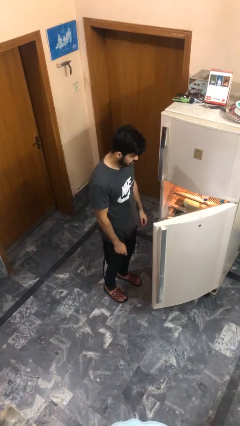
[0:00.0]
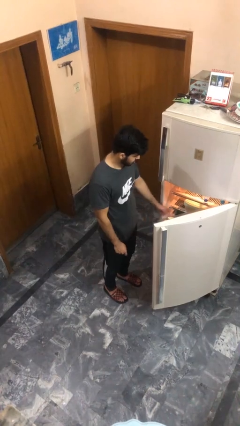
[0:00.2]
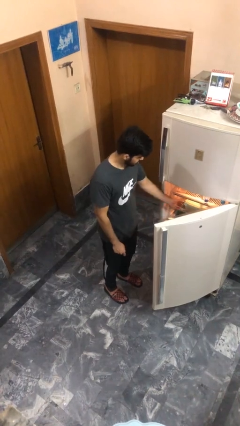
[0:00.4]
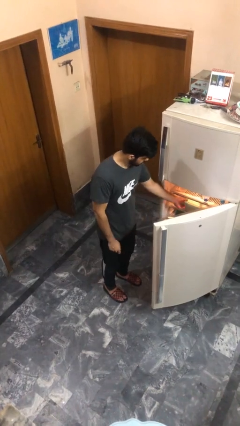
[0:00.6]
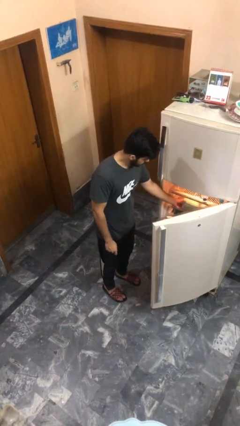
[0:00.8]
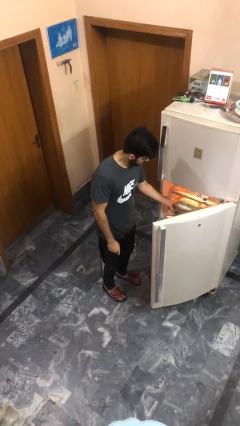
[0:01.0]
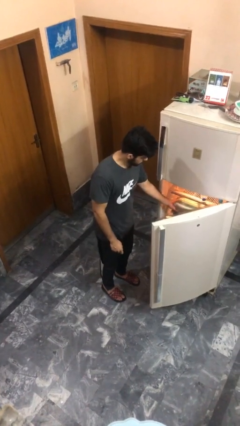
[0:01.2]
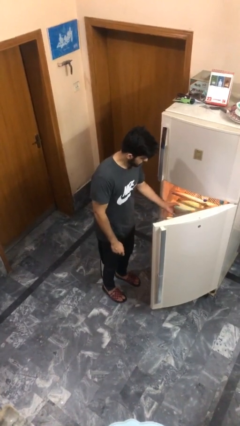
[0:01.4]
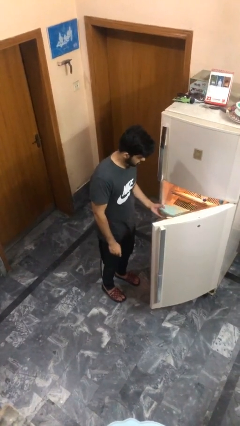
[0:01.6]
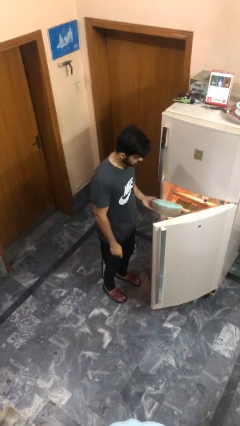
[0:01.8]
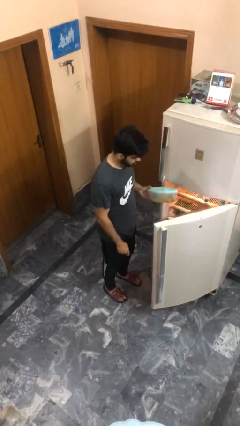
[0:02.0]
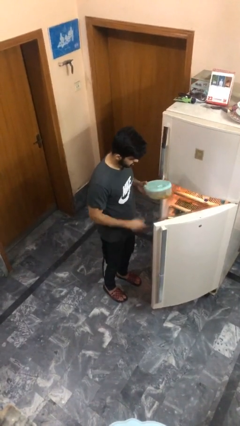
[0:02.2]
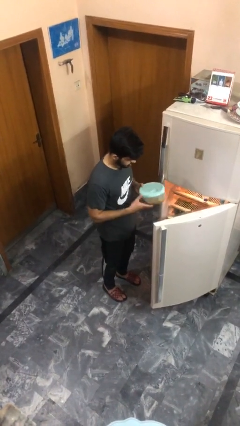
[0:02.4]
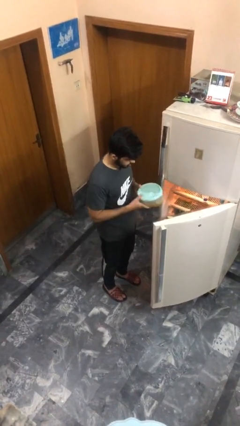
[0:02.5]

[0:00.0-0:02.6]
person picks up object from cabinet

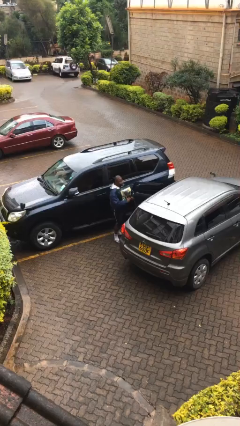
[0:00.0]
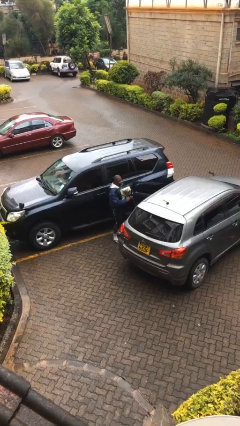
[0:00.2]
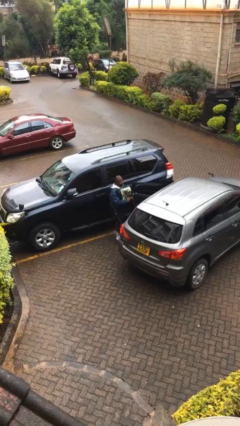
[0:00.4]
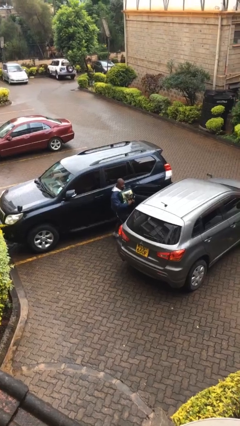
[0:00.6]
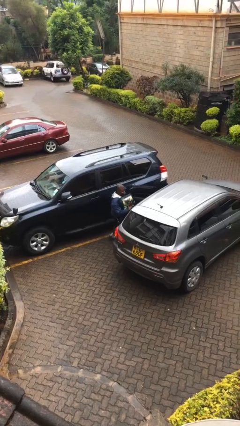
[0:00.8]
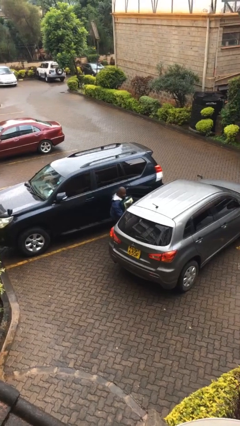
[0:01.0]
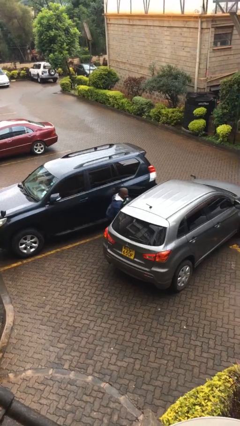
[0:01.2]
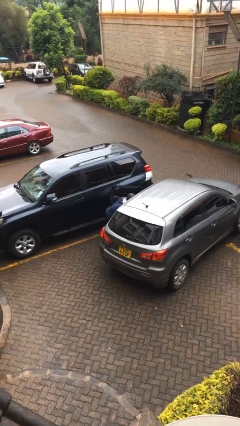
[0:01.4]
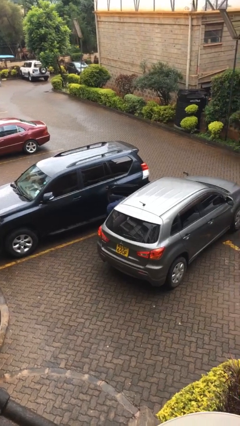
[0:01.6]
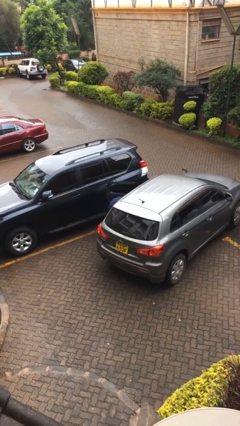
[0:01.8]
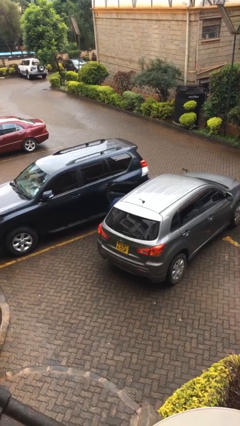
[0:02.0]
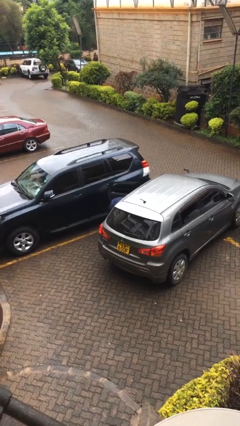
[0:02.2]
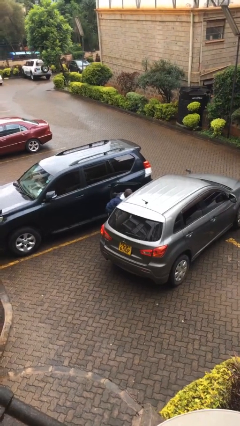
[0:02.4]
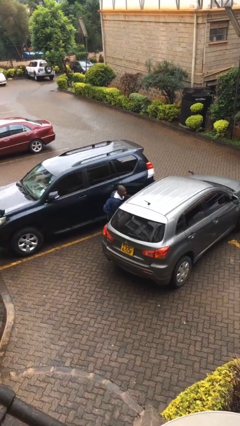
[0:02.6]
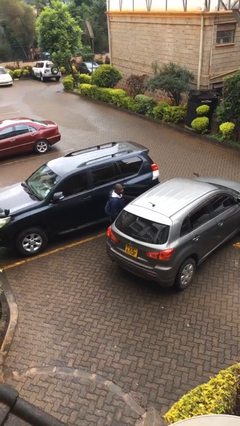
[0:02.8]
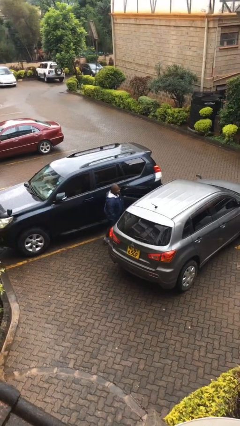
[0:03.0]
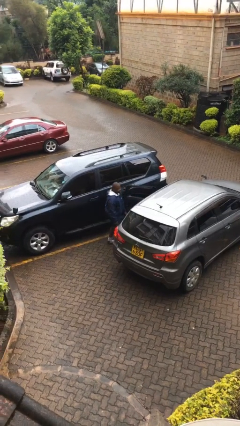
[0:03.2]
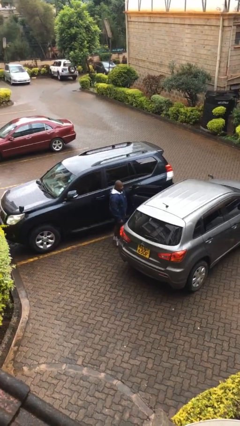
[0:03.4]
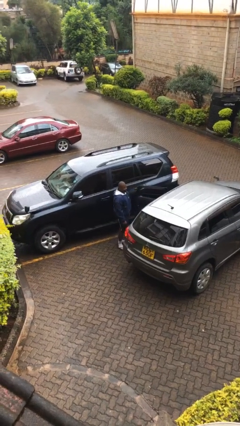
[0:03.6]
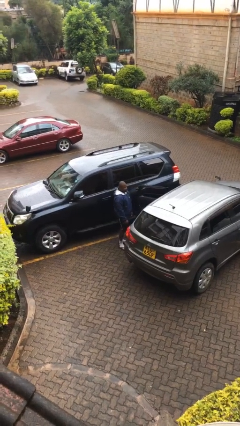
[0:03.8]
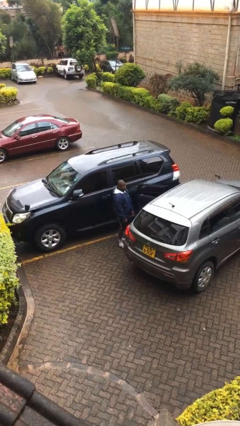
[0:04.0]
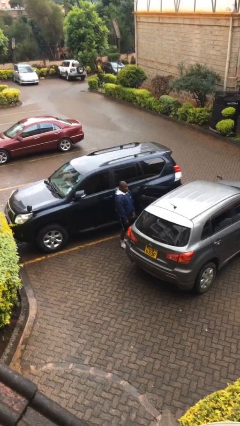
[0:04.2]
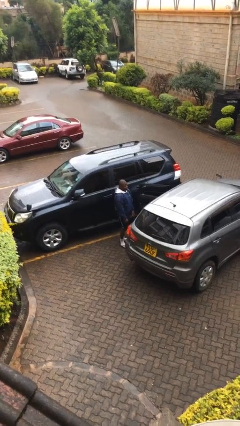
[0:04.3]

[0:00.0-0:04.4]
person loads car

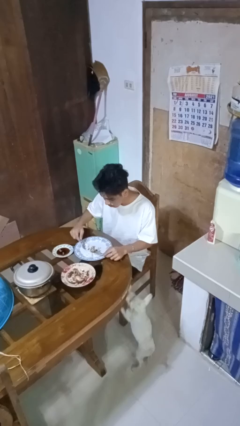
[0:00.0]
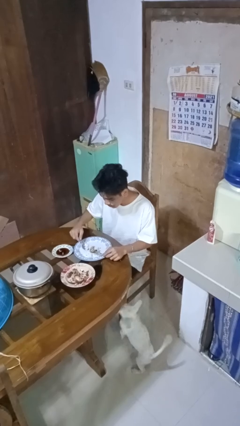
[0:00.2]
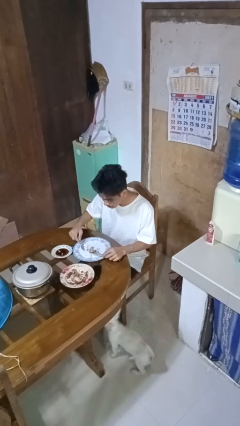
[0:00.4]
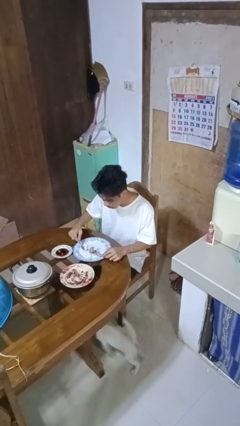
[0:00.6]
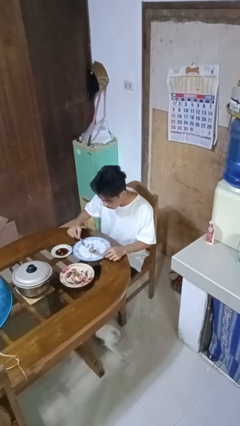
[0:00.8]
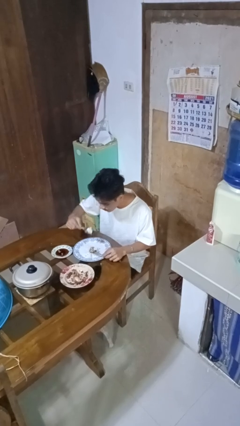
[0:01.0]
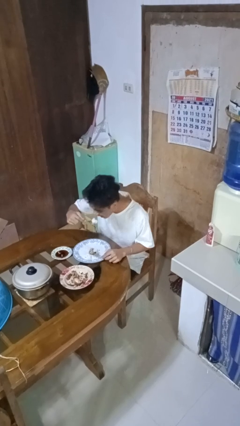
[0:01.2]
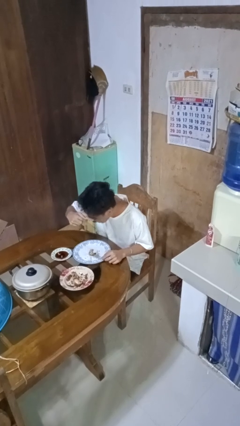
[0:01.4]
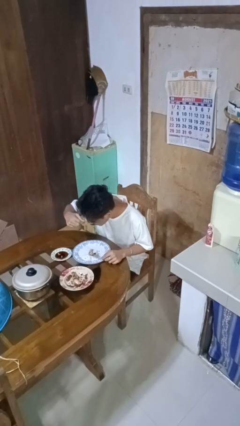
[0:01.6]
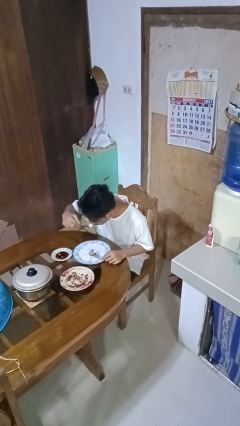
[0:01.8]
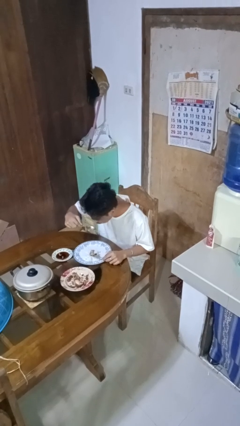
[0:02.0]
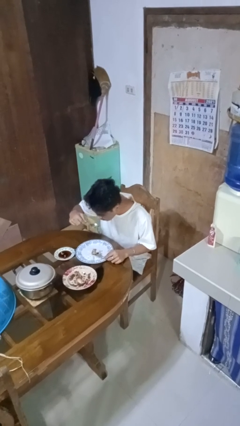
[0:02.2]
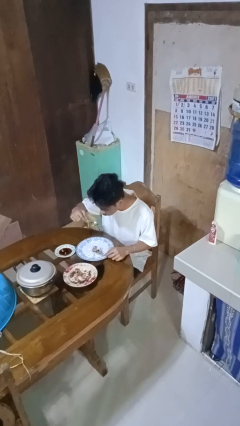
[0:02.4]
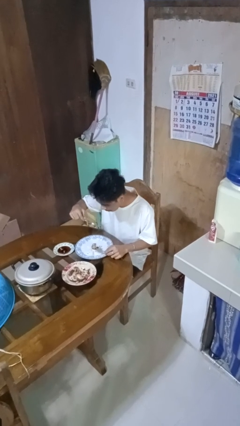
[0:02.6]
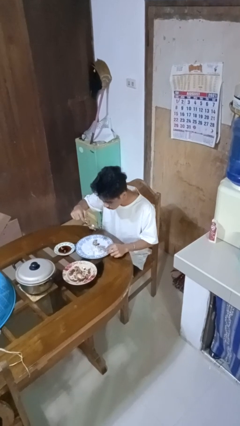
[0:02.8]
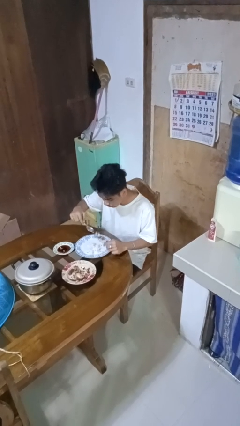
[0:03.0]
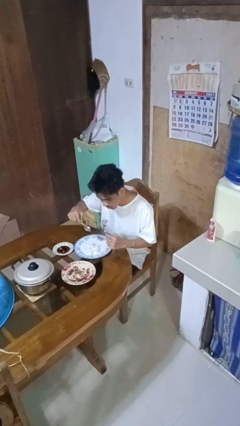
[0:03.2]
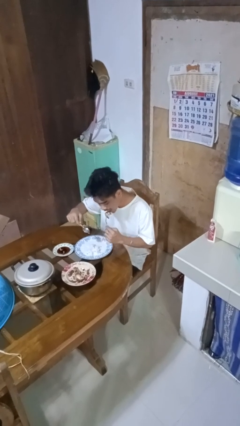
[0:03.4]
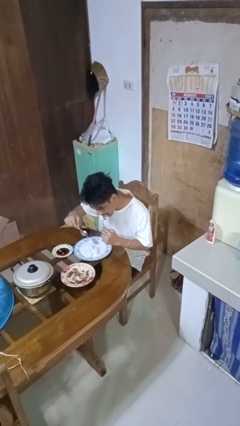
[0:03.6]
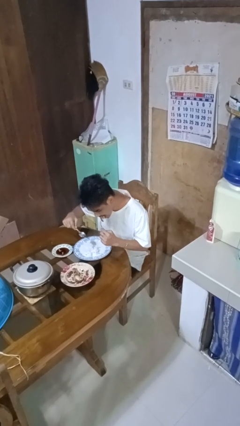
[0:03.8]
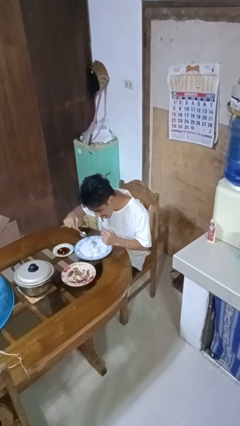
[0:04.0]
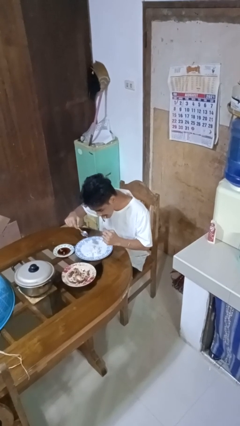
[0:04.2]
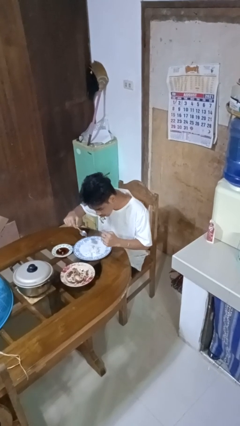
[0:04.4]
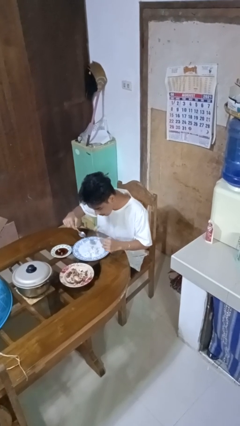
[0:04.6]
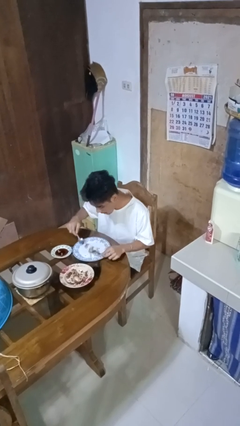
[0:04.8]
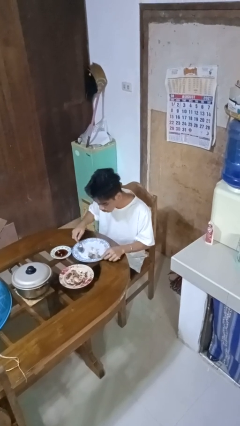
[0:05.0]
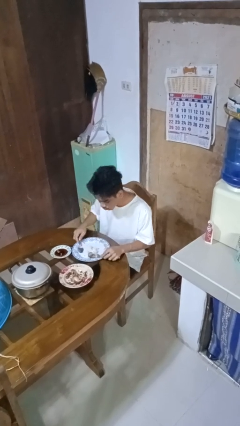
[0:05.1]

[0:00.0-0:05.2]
person eats with utensil

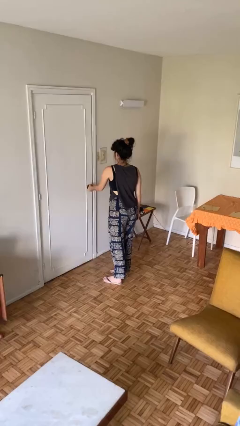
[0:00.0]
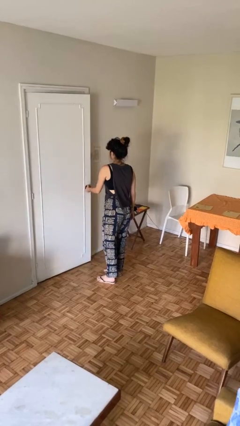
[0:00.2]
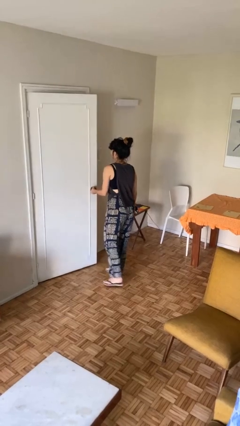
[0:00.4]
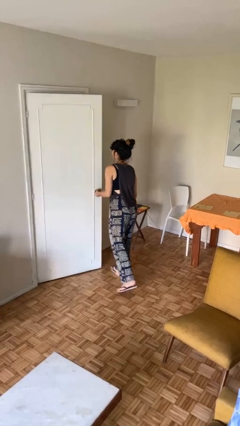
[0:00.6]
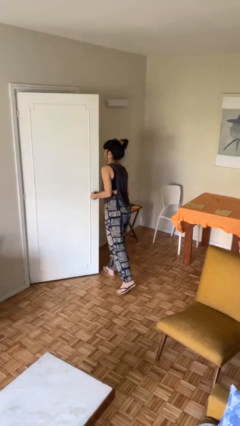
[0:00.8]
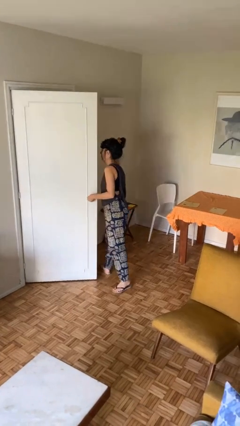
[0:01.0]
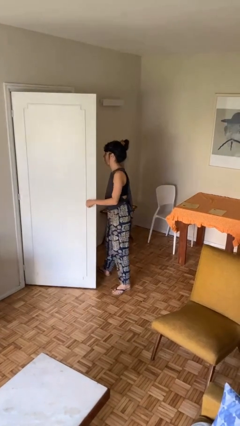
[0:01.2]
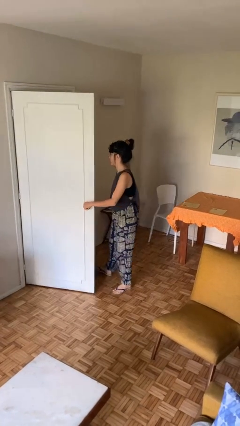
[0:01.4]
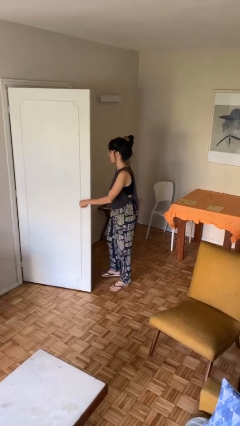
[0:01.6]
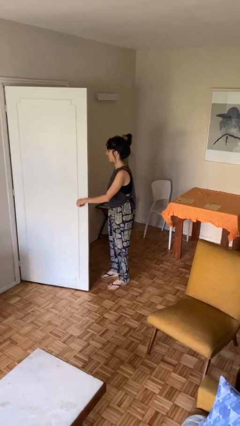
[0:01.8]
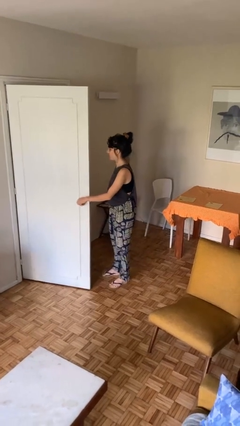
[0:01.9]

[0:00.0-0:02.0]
person opens facility door

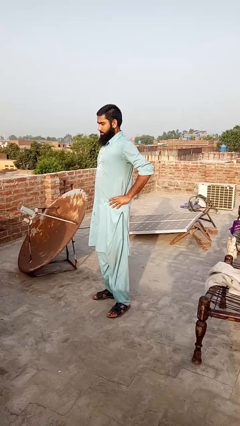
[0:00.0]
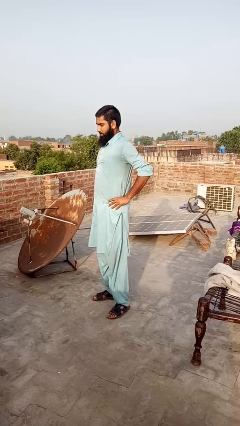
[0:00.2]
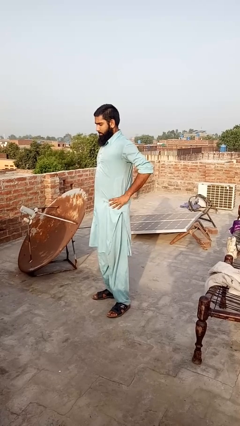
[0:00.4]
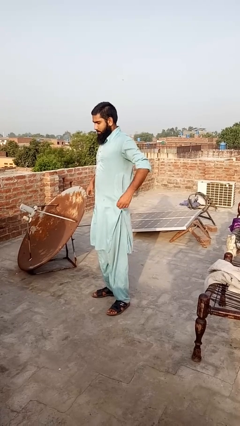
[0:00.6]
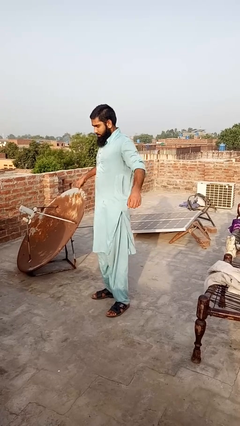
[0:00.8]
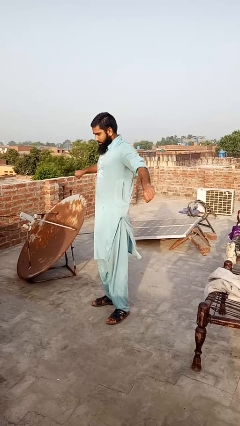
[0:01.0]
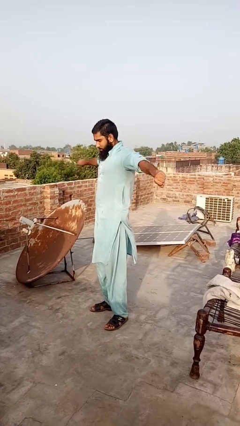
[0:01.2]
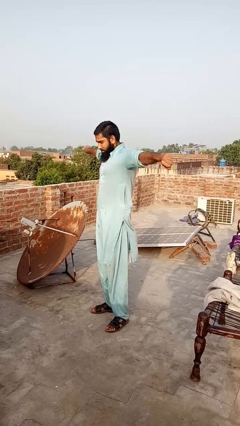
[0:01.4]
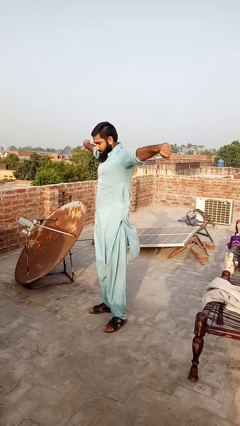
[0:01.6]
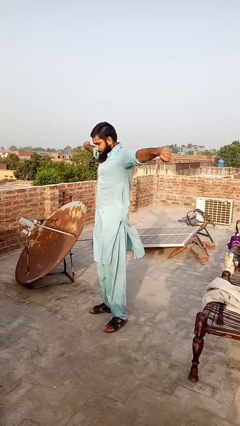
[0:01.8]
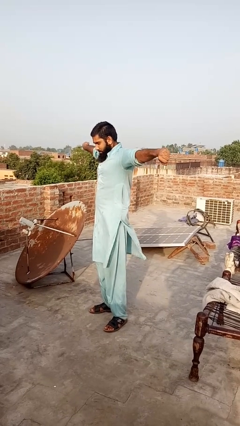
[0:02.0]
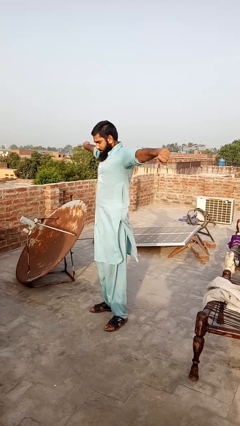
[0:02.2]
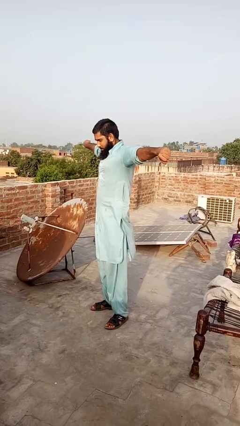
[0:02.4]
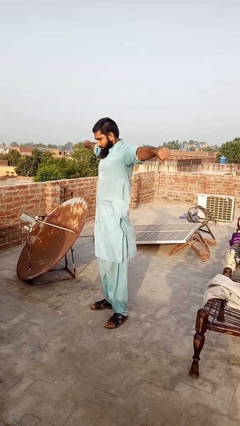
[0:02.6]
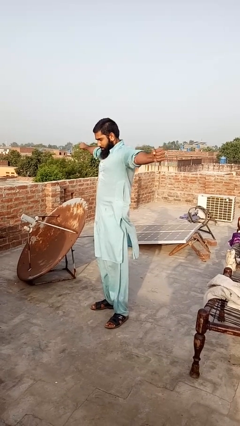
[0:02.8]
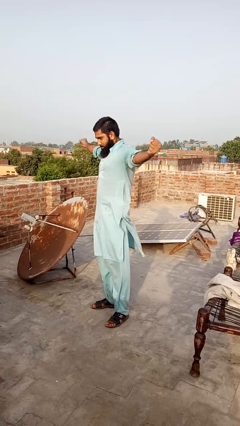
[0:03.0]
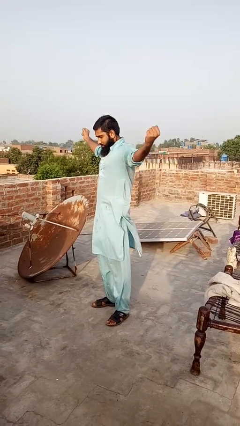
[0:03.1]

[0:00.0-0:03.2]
person stretches arms to side
